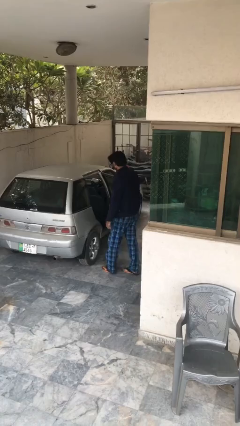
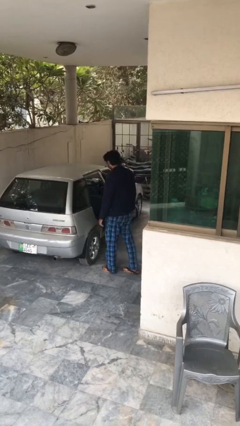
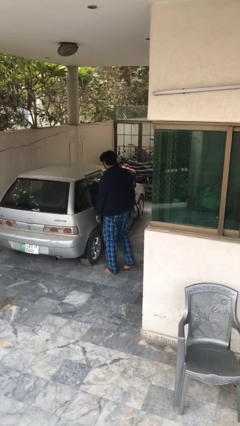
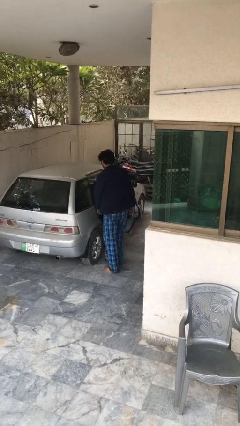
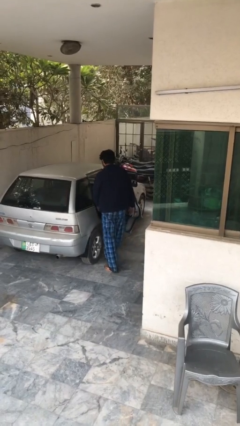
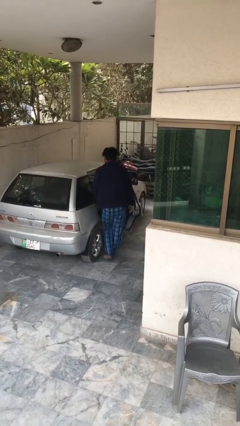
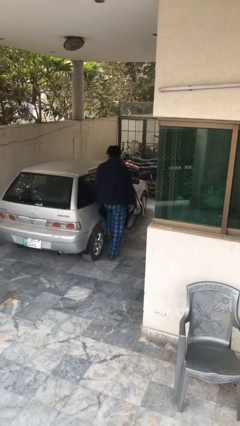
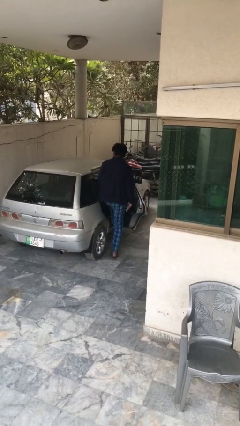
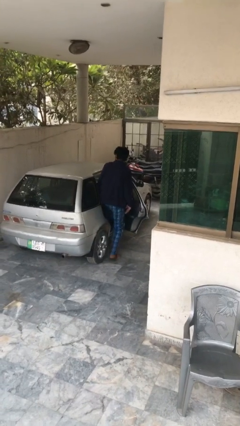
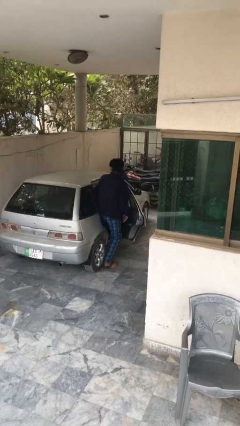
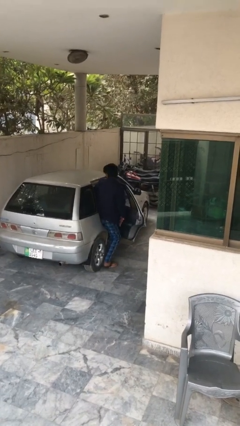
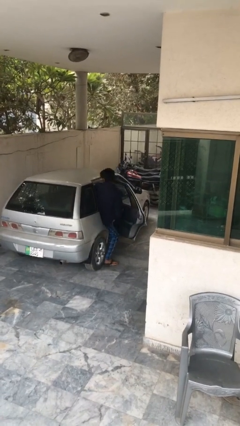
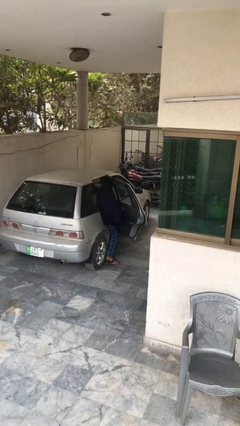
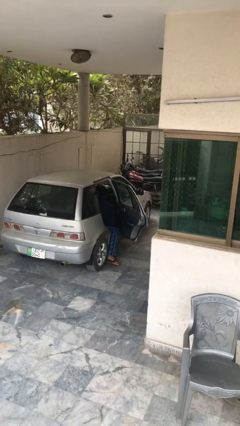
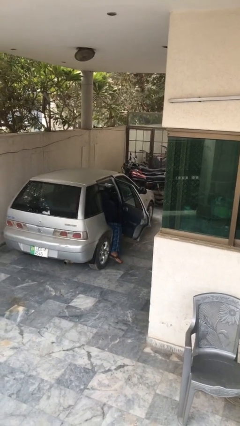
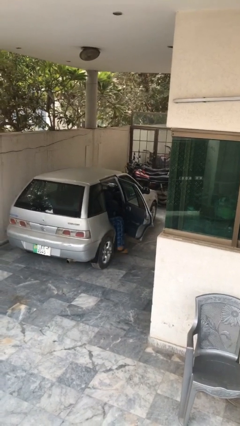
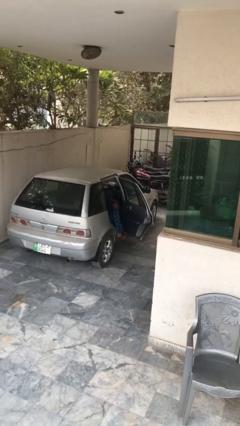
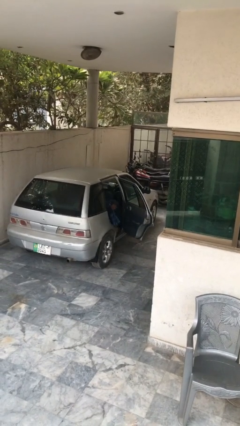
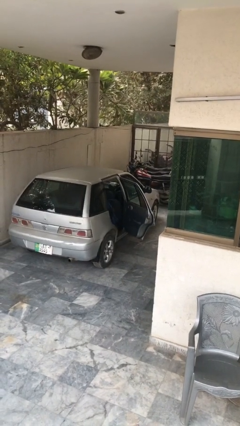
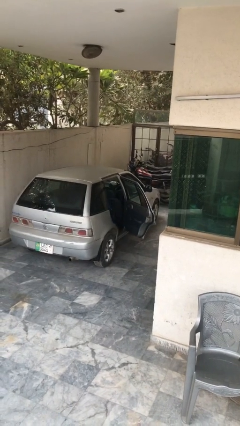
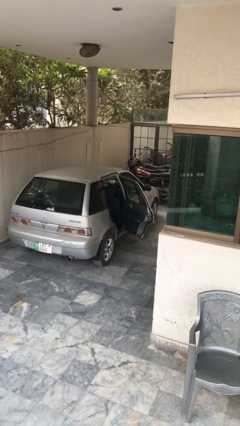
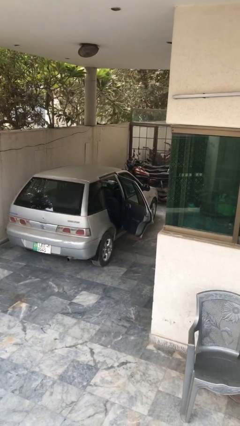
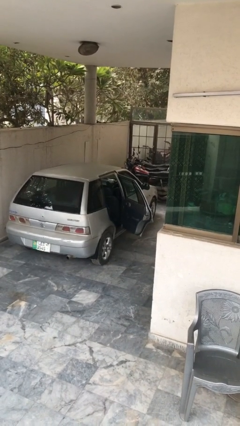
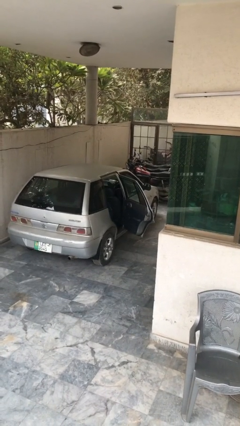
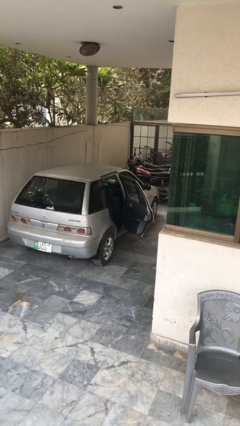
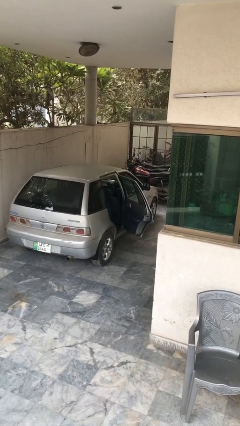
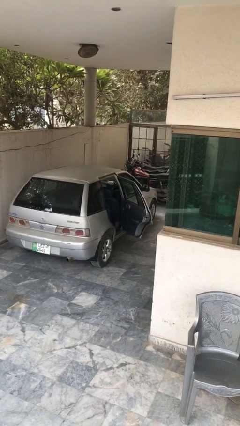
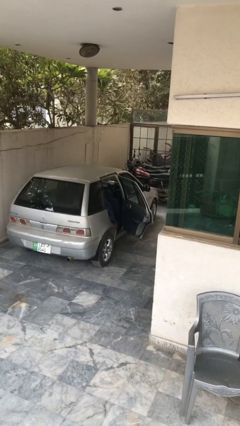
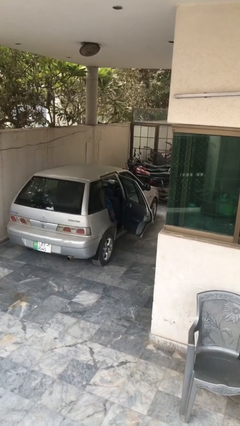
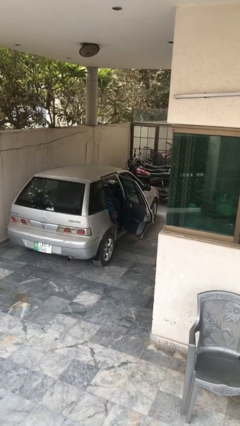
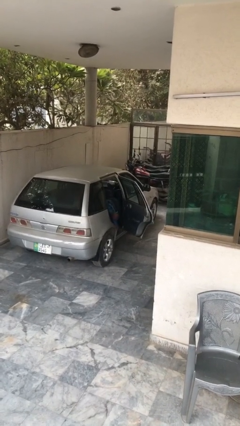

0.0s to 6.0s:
person enters car

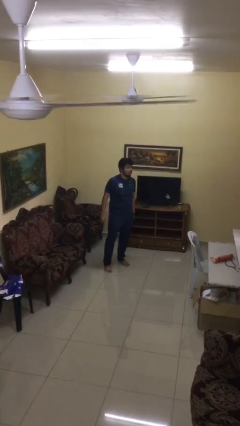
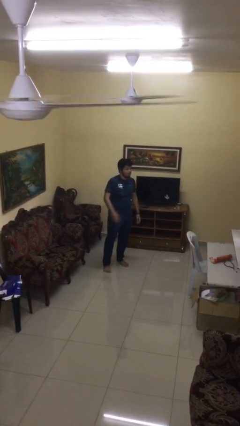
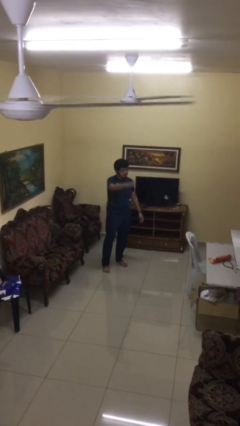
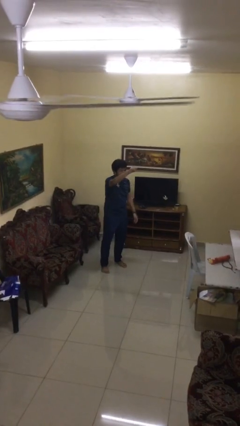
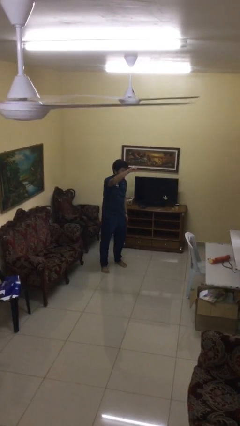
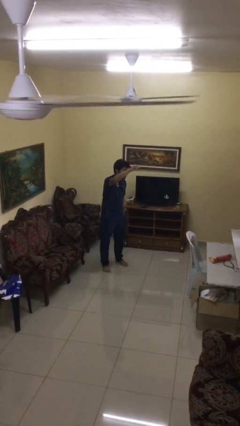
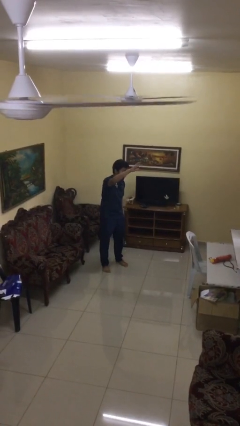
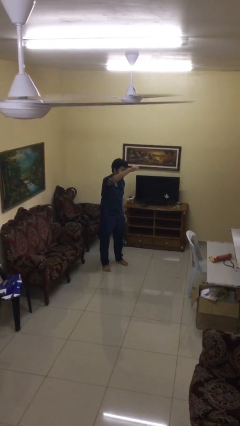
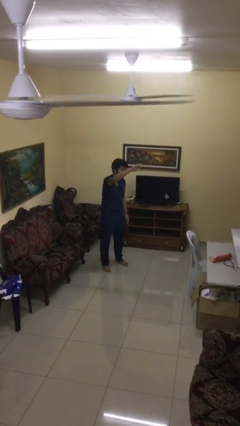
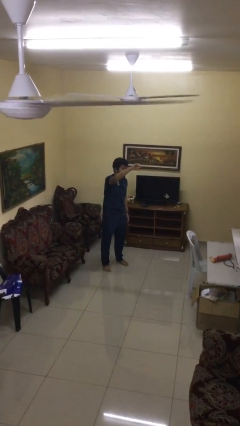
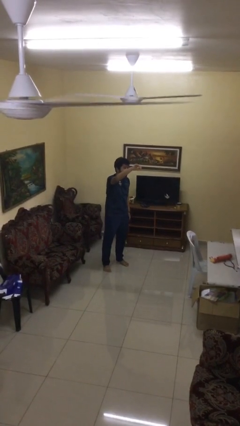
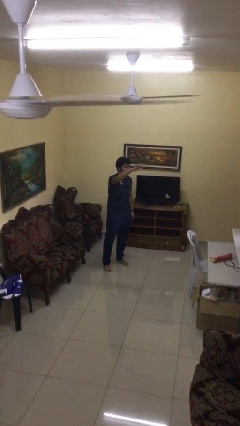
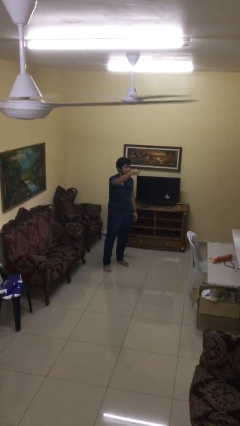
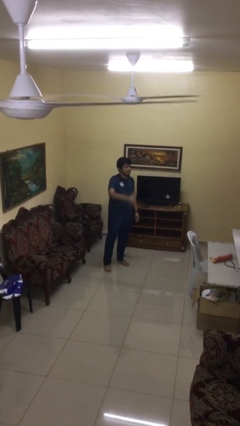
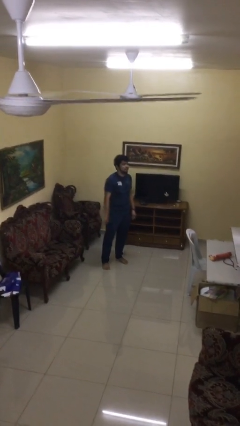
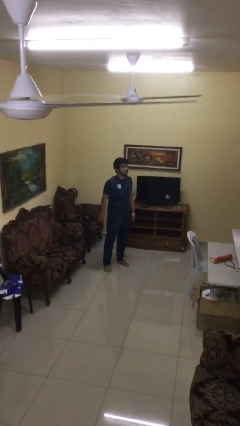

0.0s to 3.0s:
person gestures come here

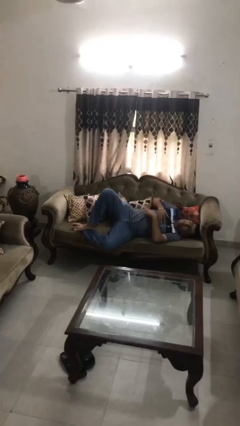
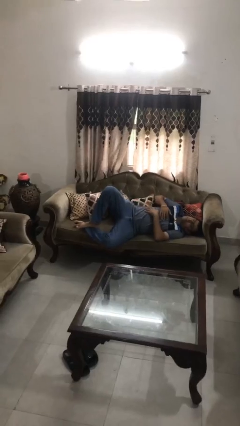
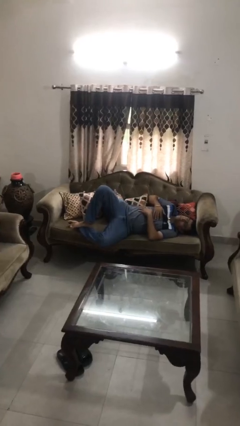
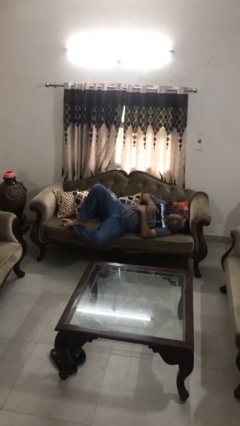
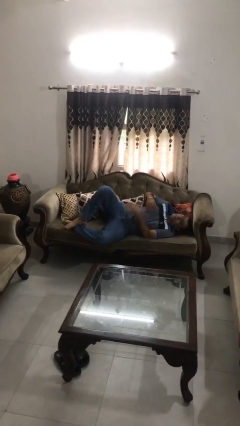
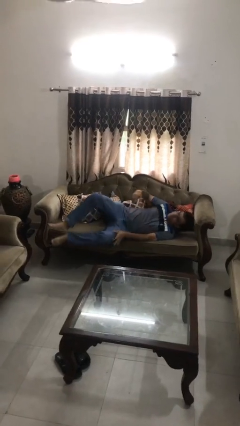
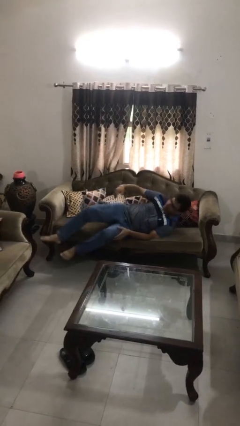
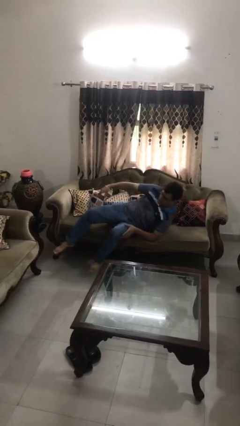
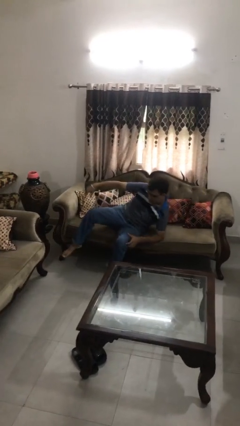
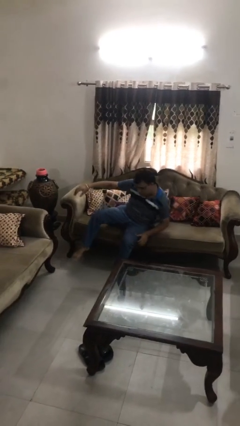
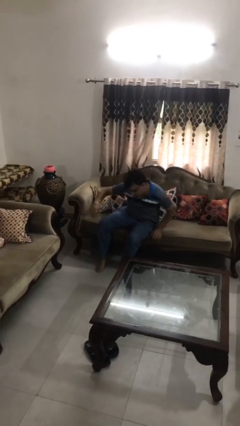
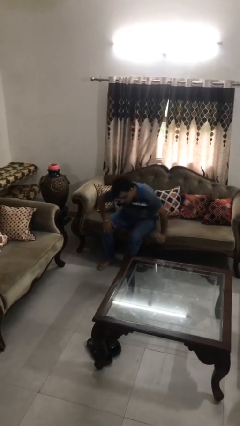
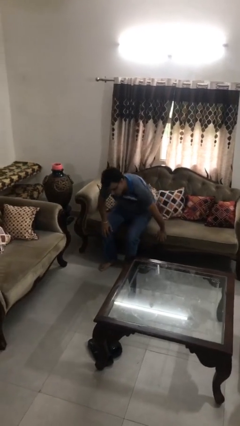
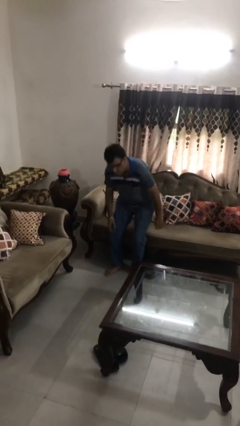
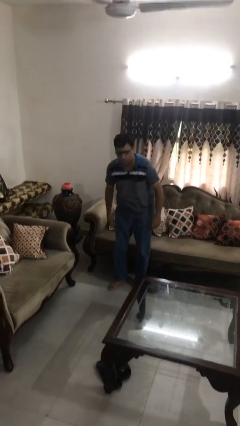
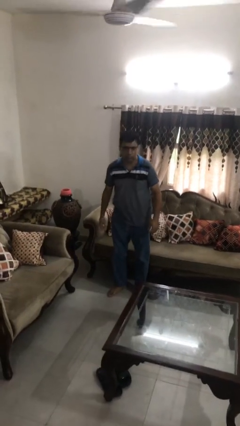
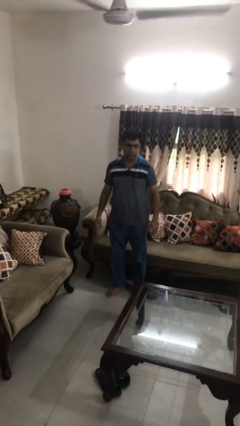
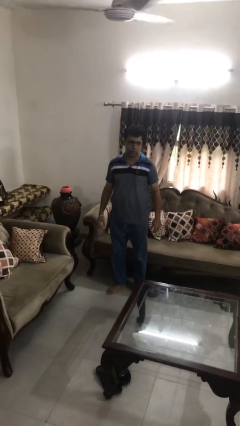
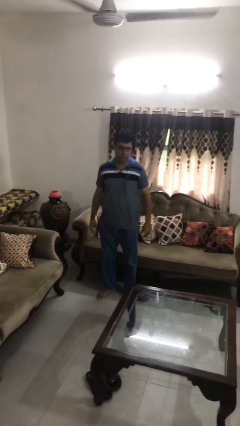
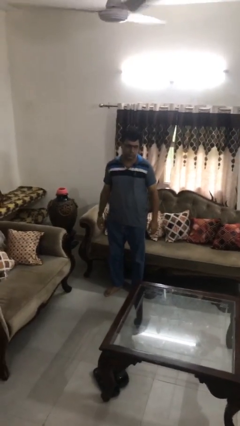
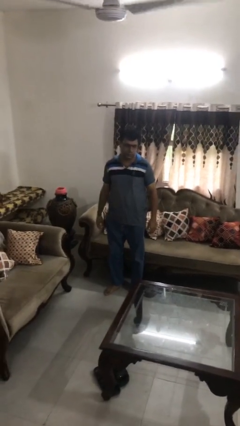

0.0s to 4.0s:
person stands up

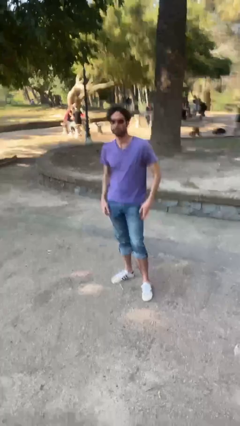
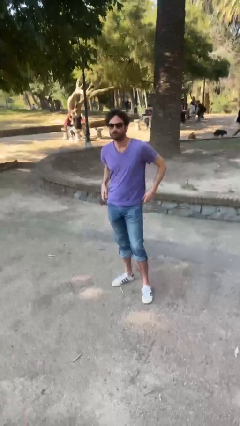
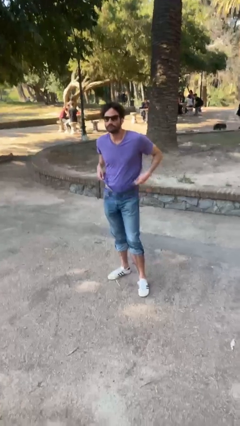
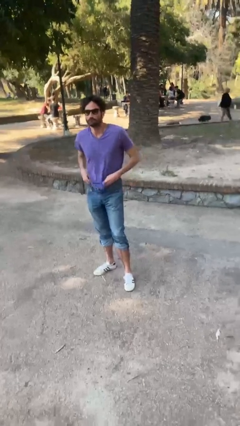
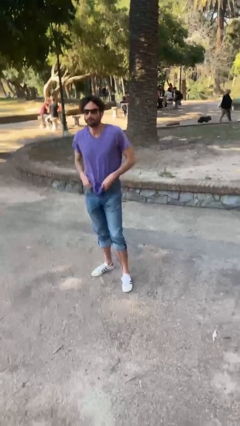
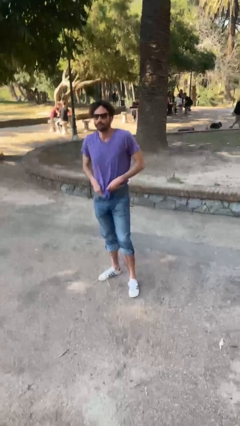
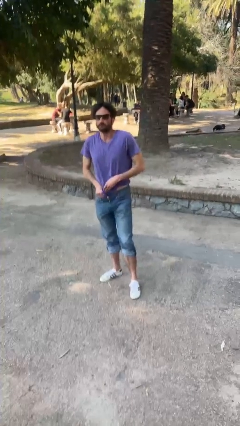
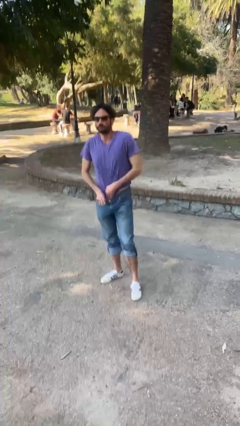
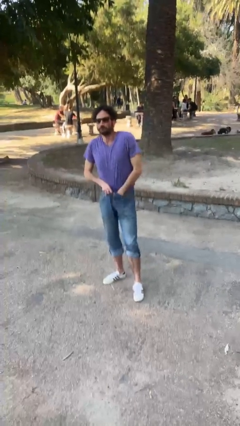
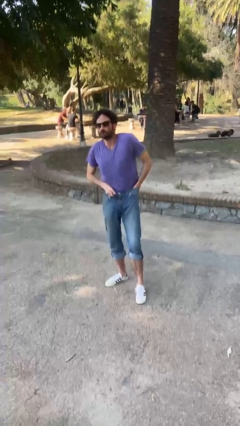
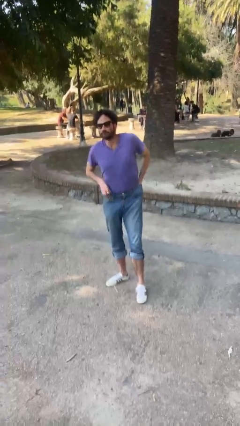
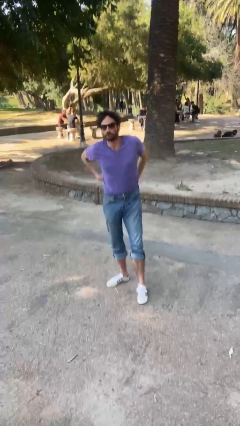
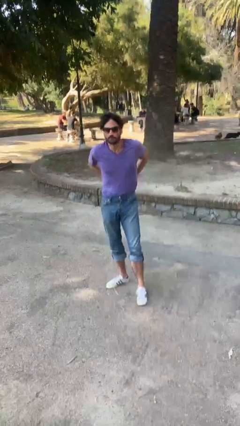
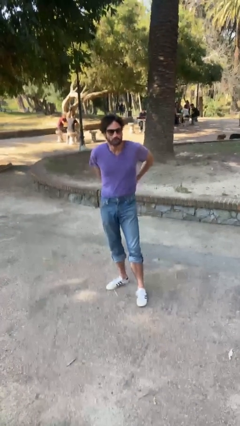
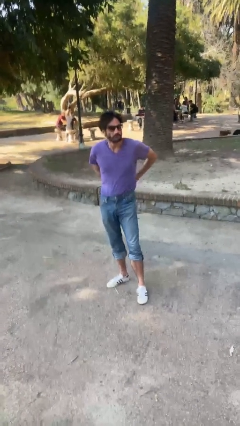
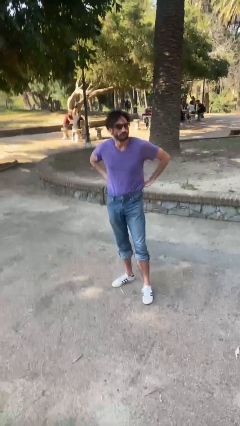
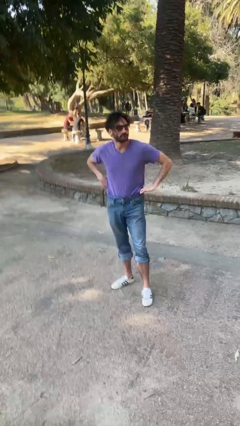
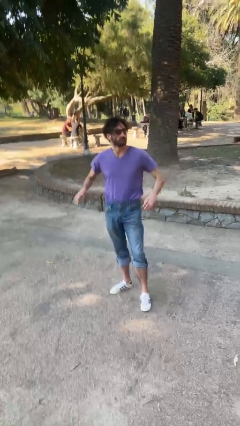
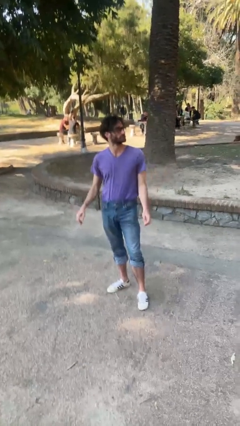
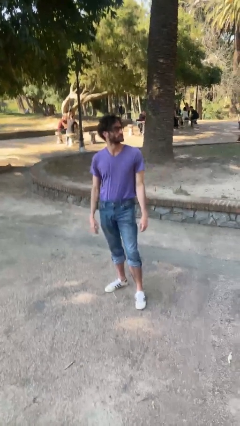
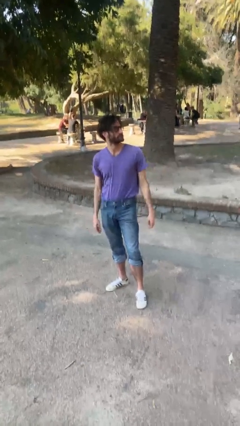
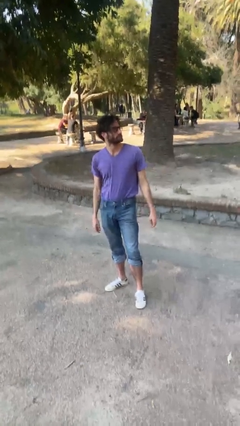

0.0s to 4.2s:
person tucks in shirt

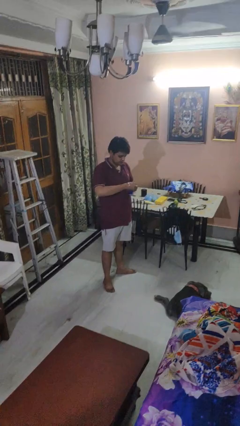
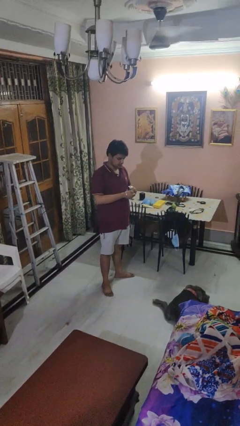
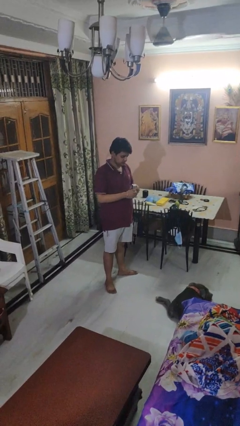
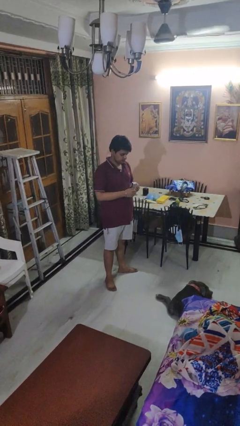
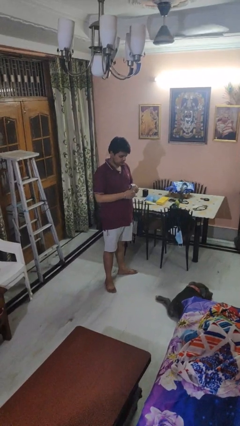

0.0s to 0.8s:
person opens beverage can
